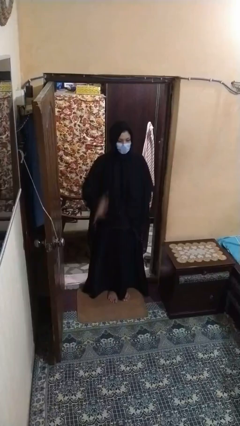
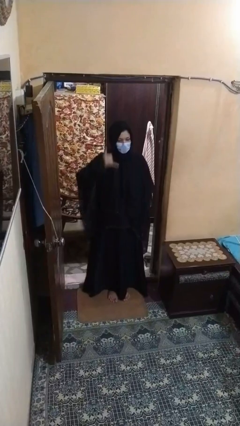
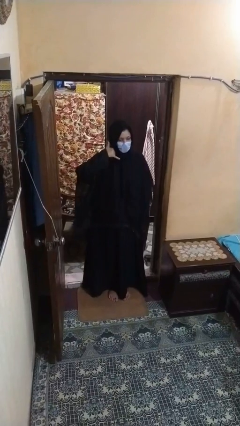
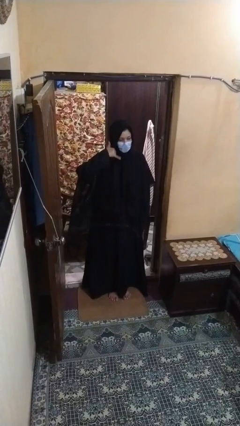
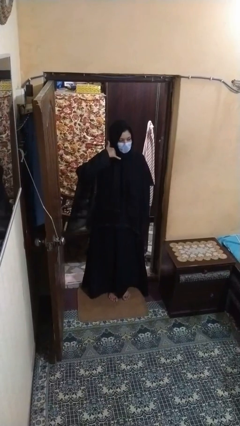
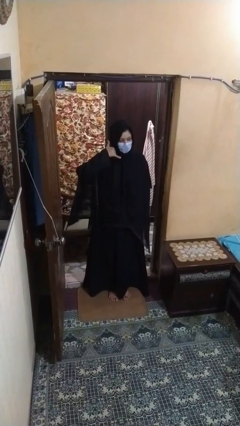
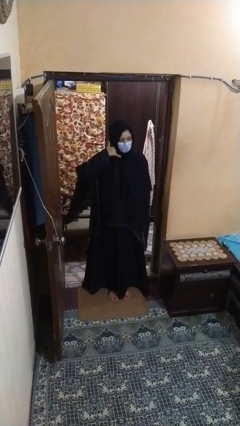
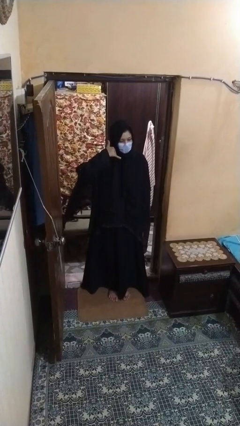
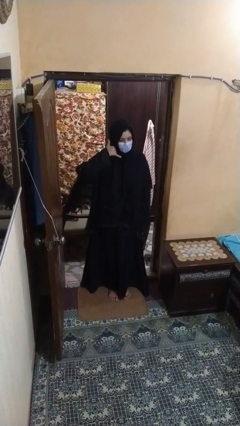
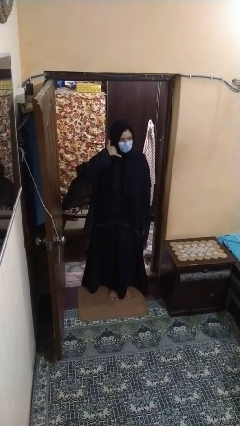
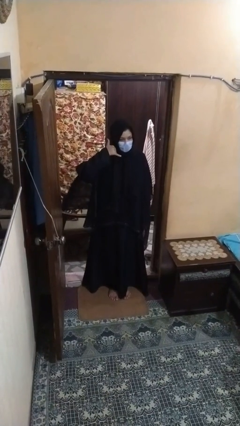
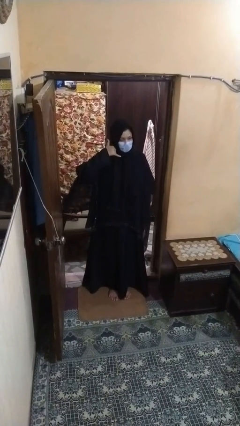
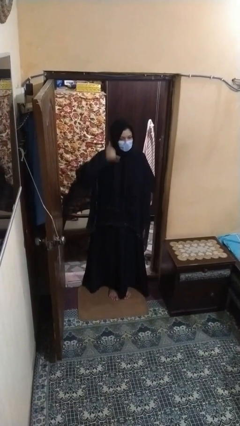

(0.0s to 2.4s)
person gestures call me

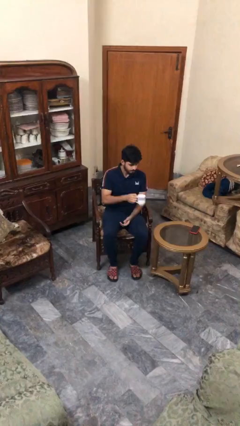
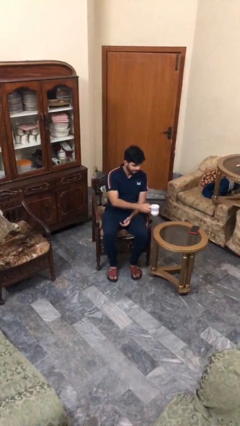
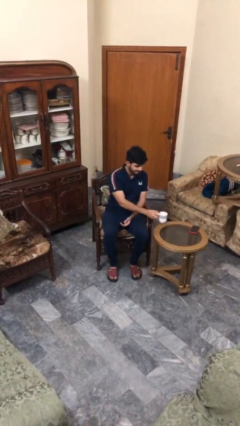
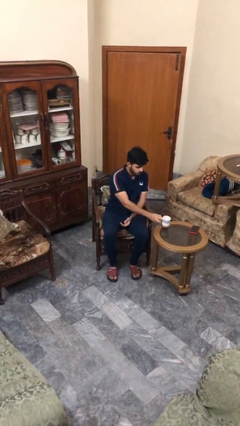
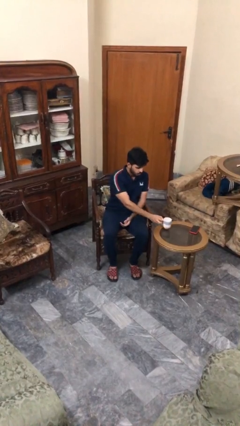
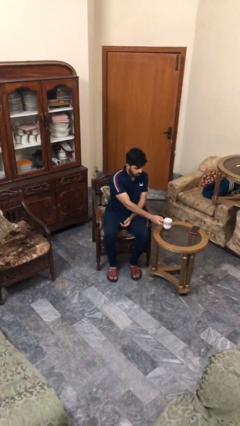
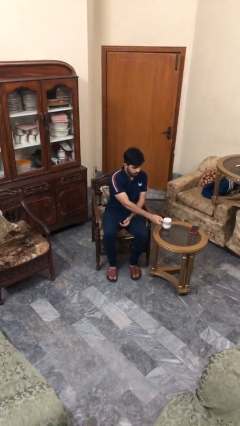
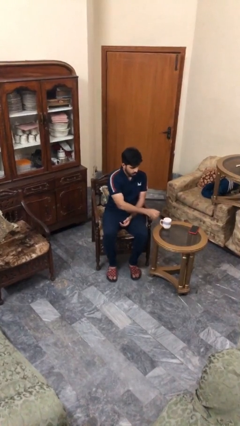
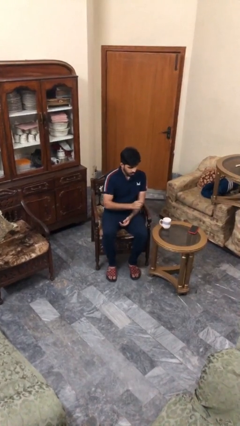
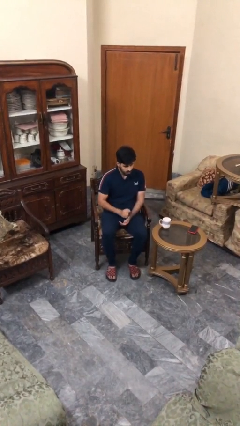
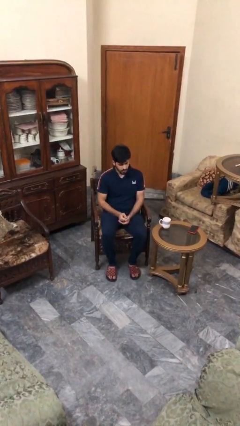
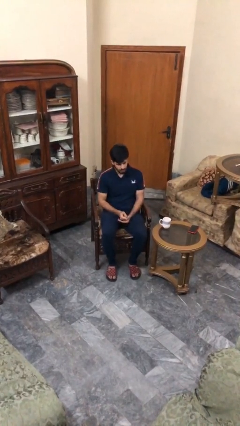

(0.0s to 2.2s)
person puts down object on table

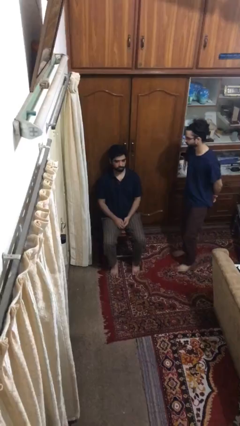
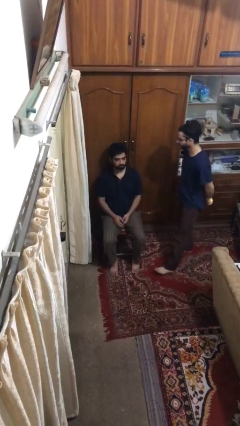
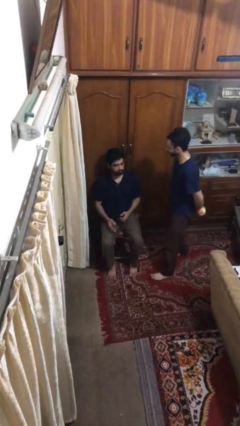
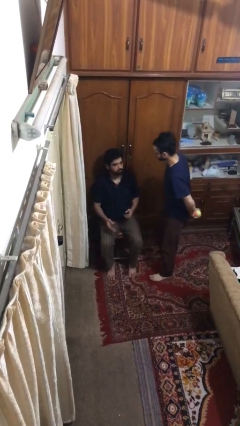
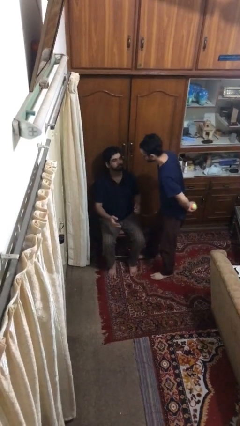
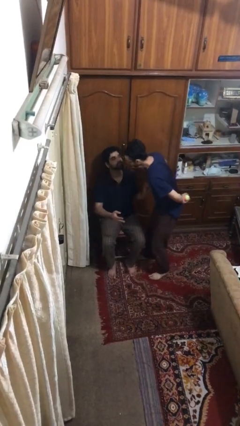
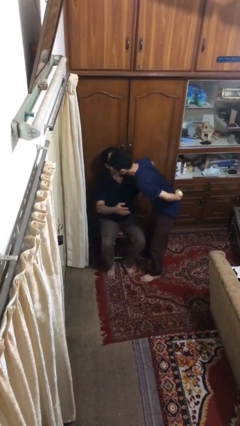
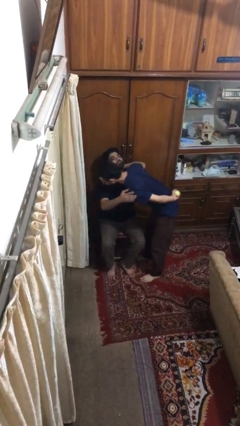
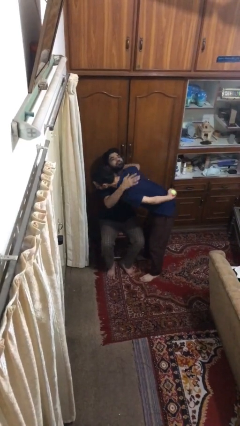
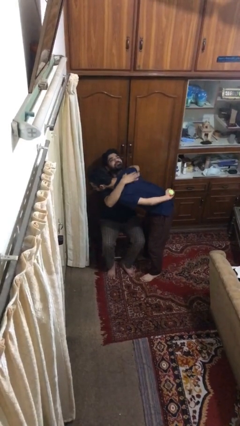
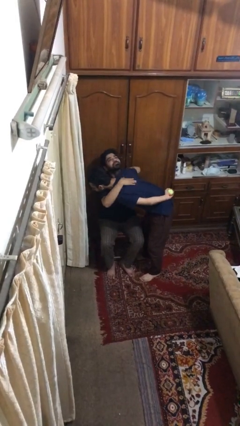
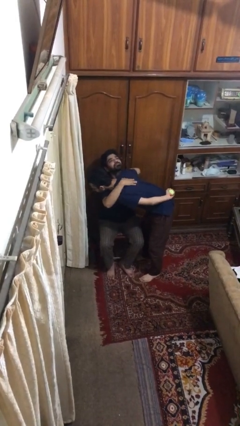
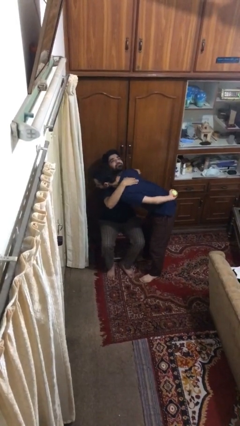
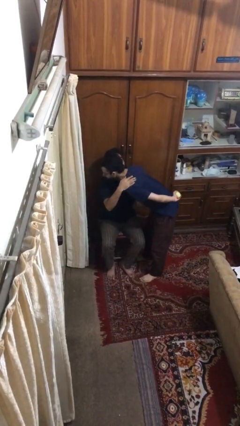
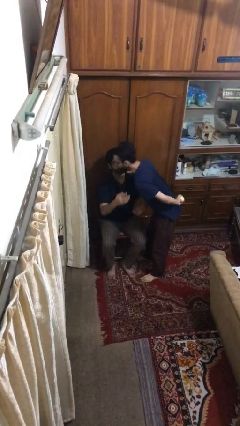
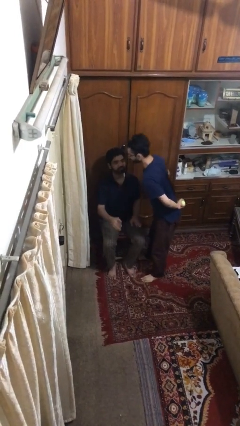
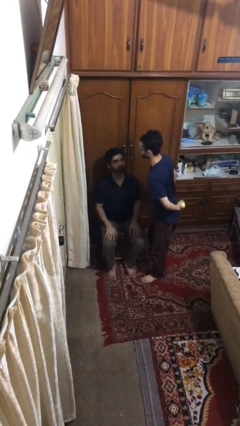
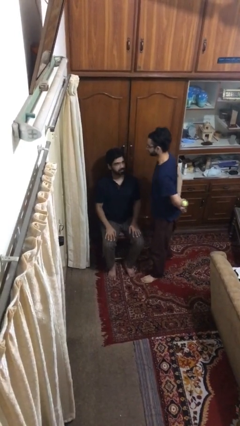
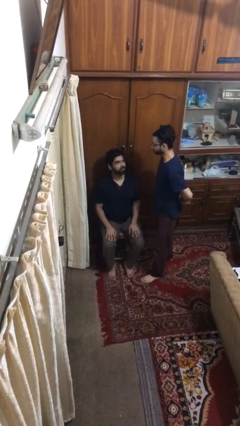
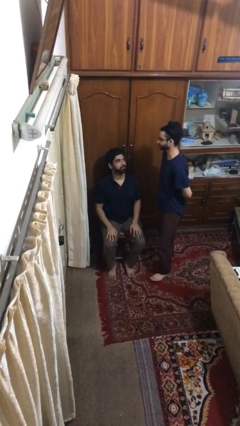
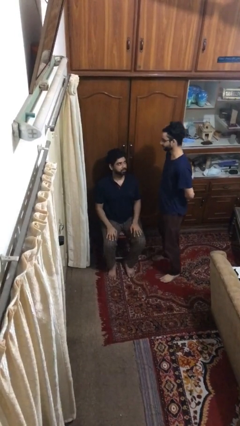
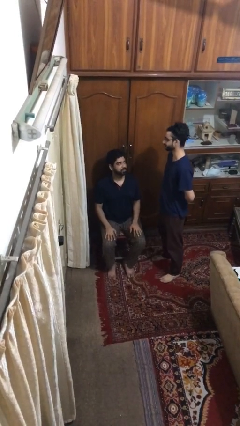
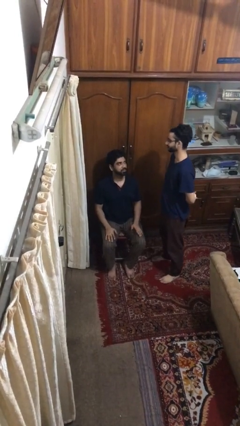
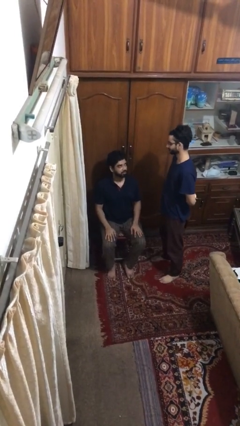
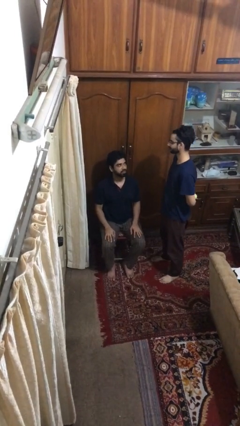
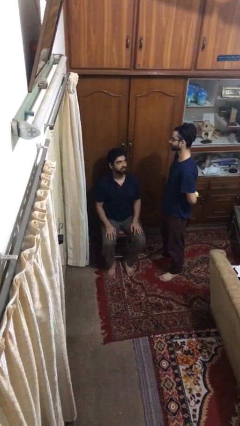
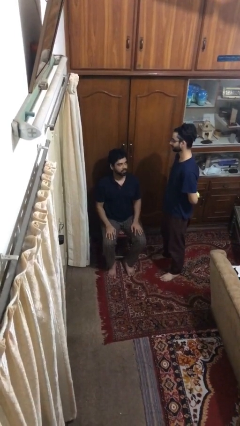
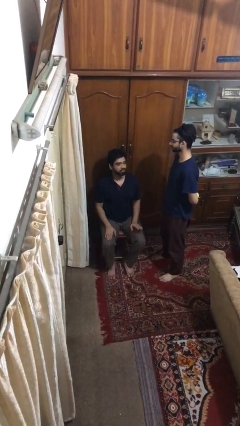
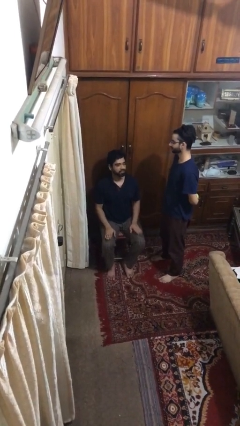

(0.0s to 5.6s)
person embraces person

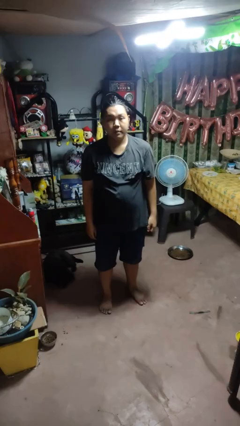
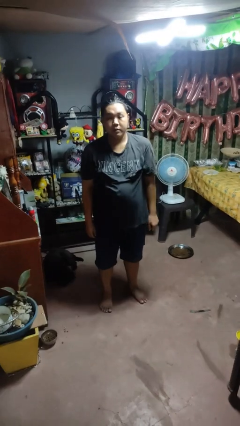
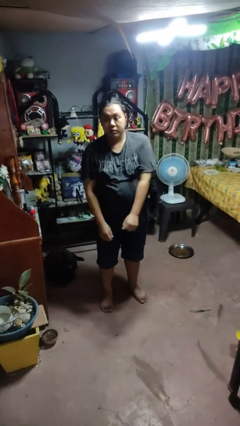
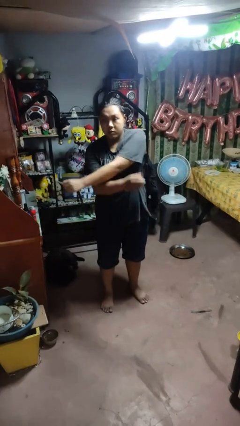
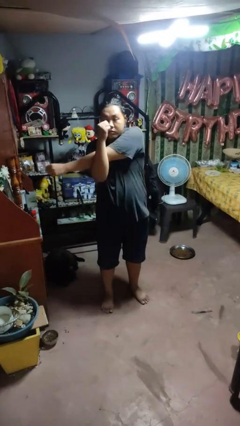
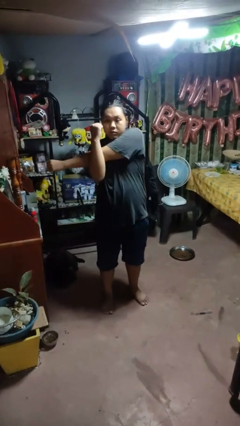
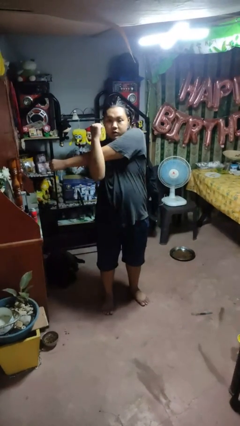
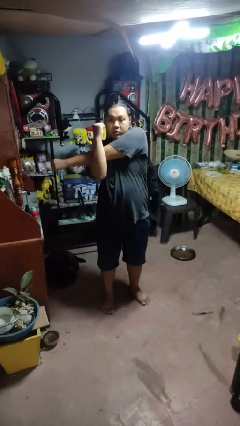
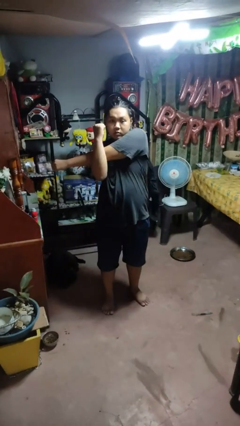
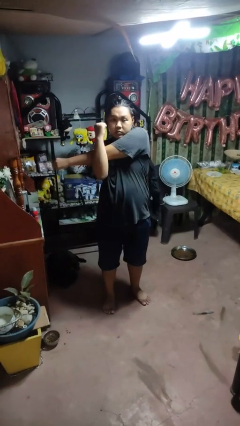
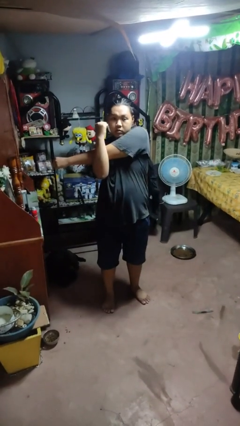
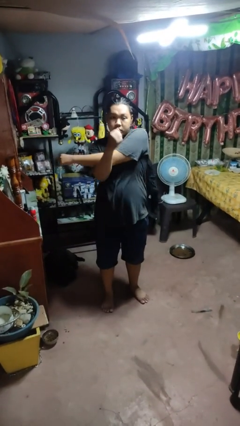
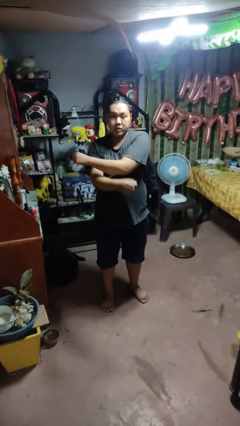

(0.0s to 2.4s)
person crosses arms

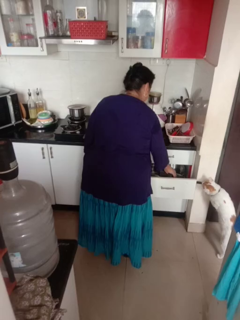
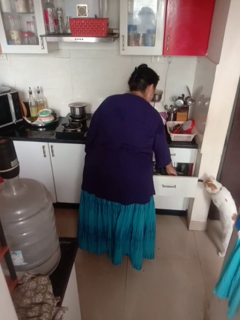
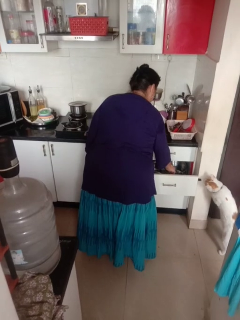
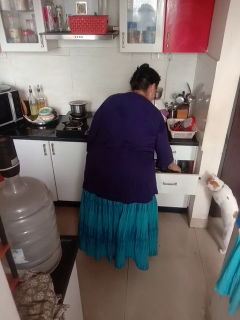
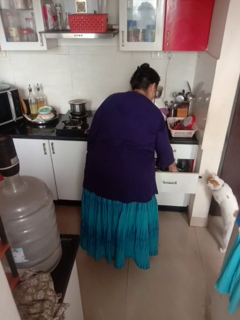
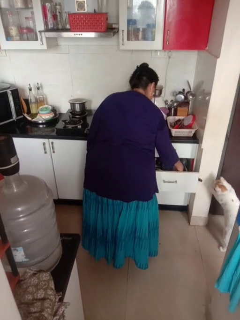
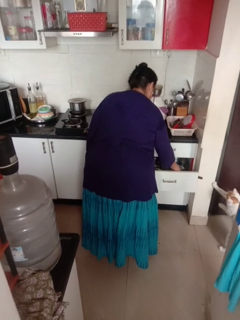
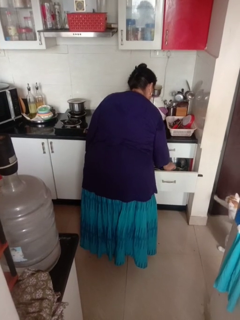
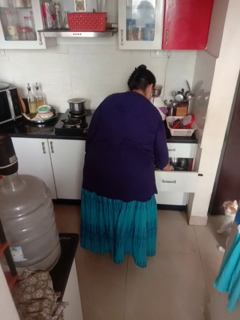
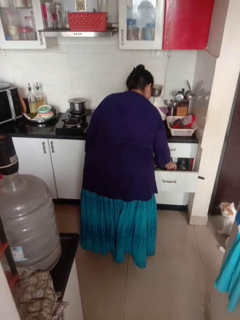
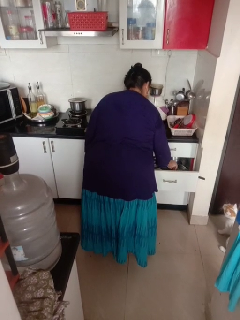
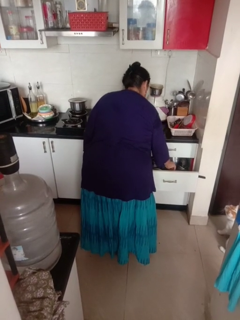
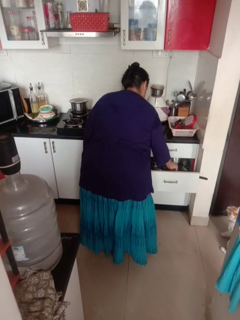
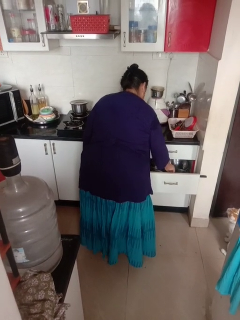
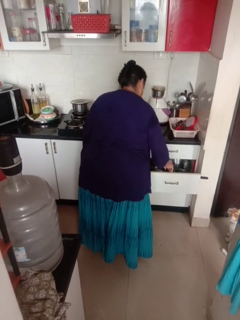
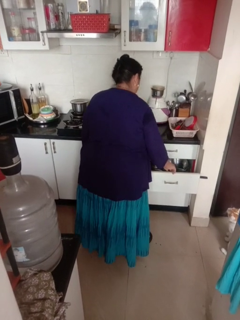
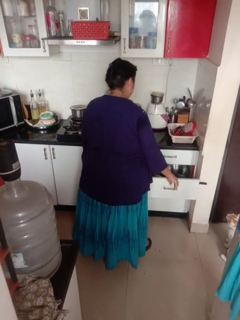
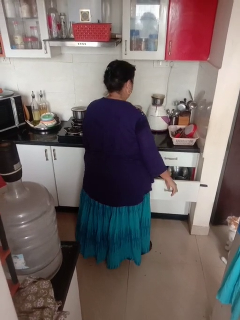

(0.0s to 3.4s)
person searches in kitchen drawer

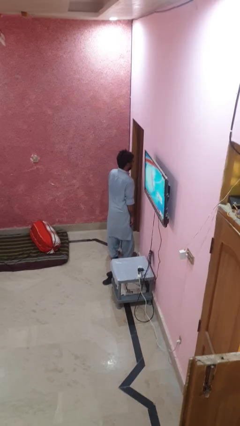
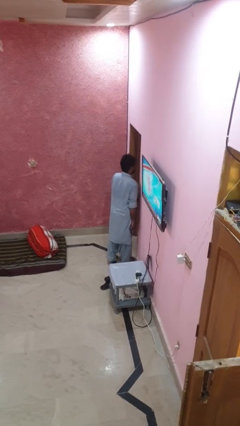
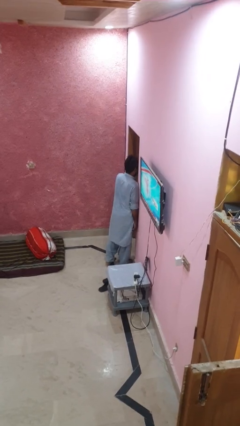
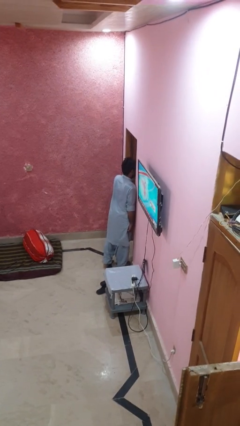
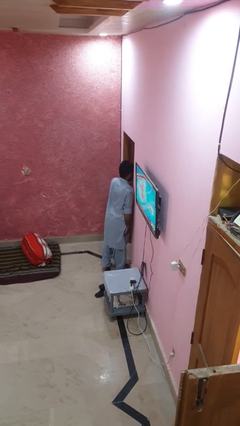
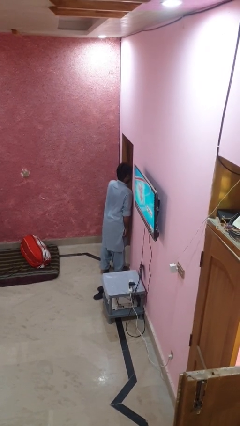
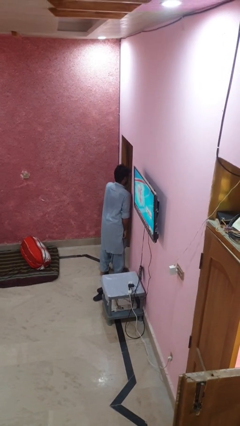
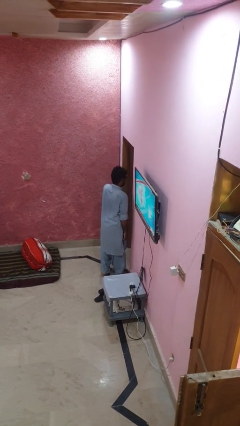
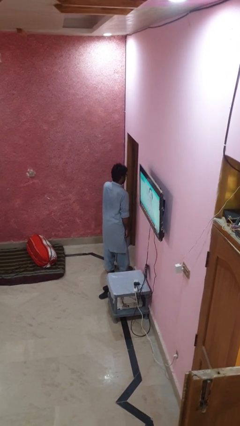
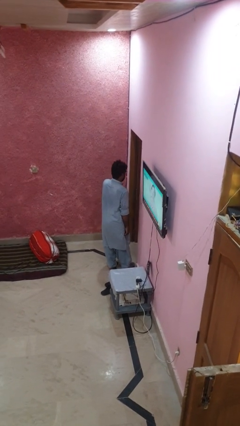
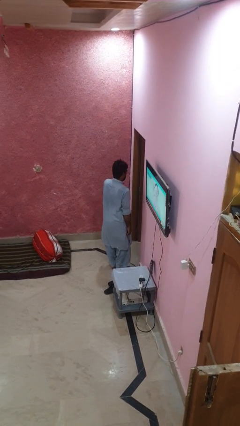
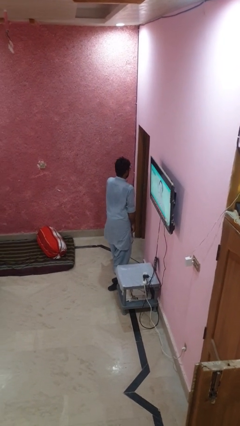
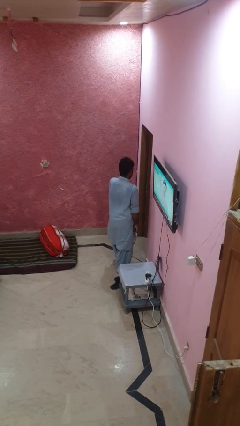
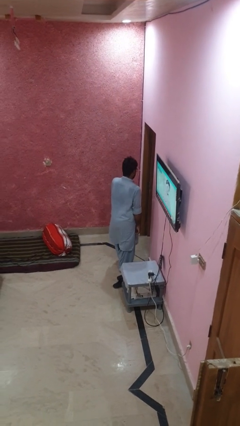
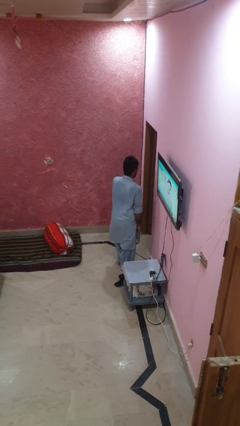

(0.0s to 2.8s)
person bumps into wall
